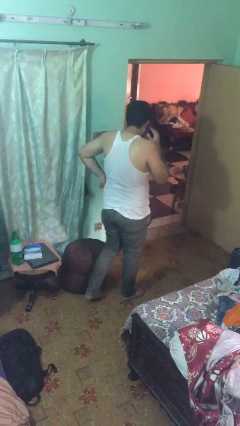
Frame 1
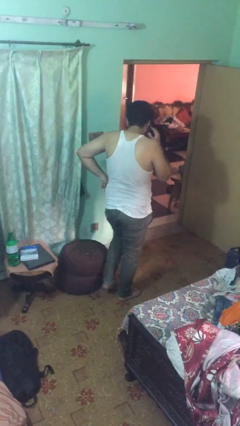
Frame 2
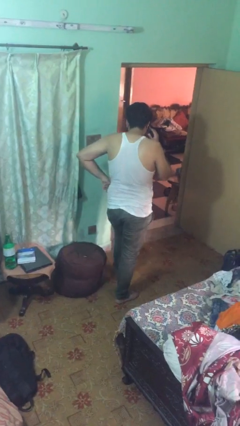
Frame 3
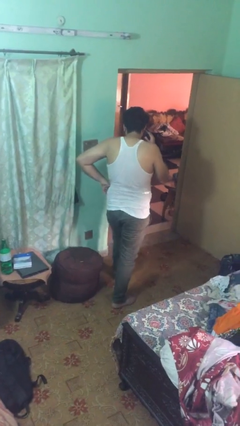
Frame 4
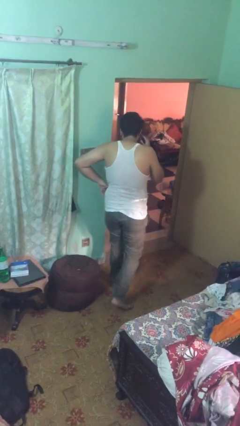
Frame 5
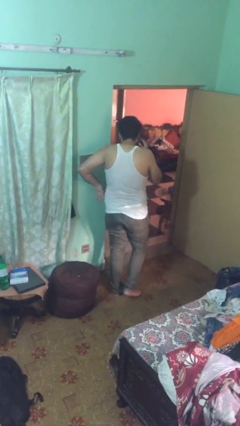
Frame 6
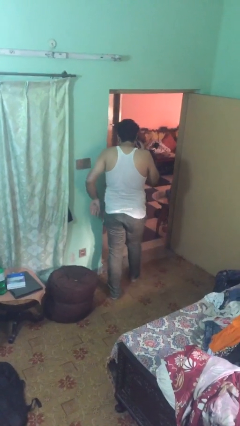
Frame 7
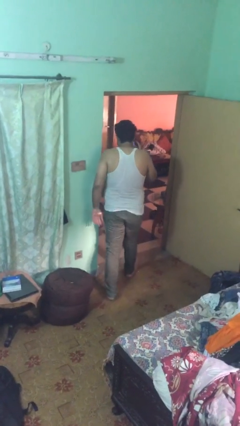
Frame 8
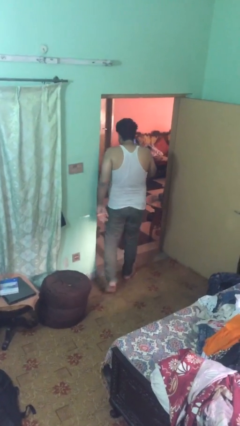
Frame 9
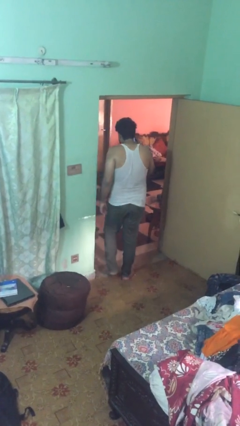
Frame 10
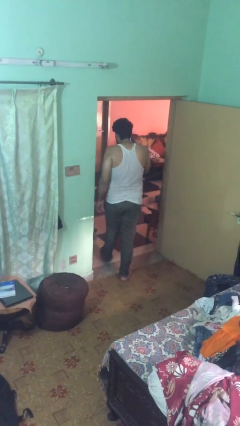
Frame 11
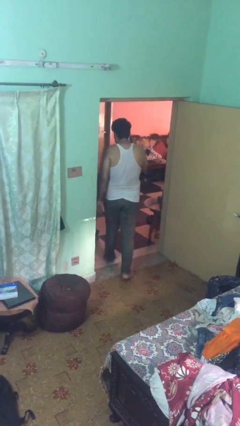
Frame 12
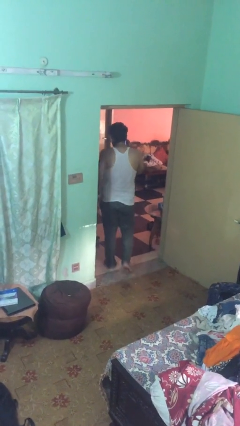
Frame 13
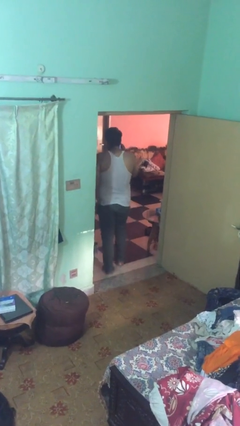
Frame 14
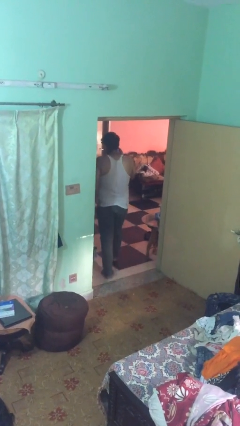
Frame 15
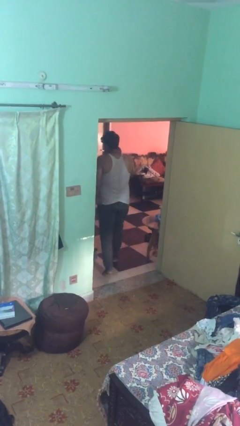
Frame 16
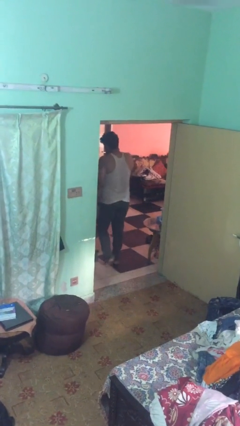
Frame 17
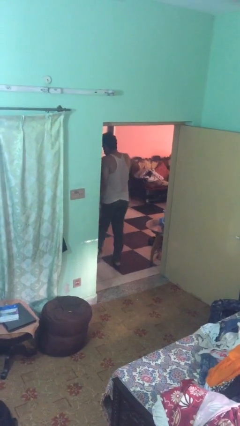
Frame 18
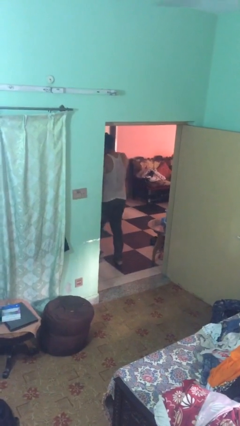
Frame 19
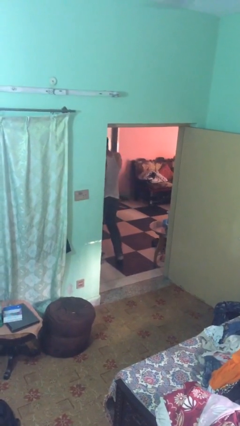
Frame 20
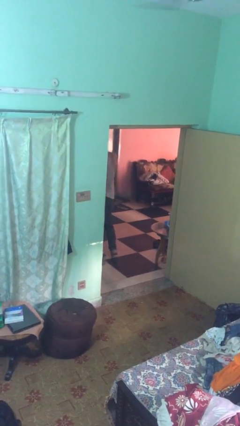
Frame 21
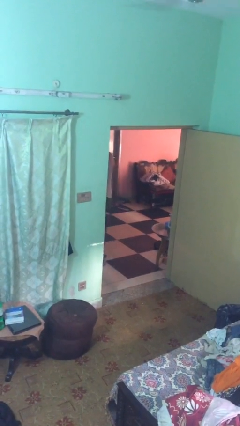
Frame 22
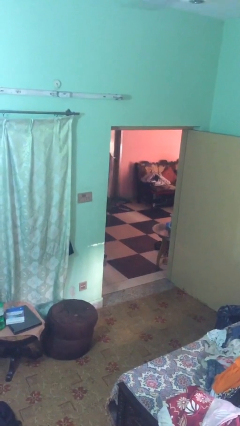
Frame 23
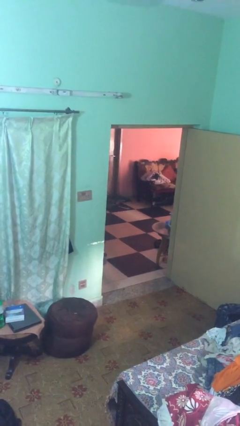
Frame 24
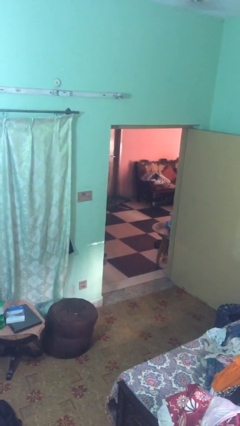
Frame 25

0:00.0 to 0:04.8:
person exits scene through structure

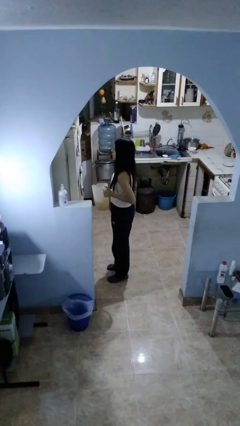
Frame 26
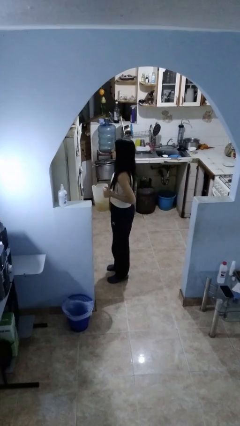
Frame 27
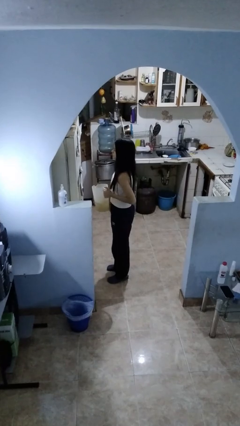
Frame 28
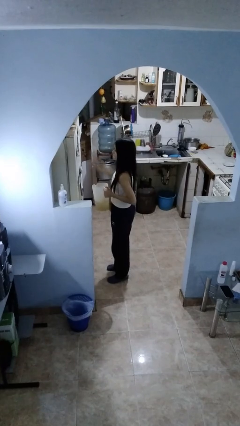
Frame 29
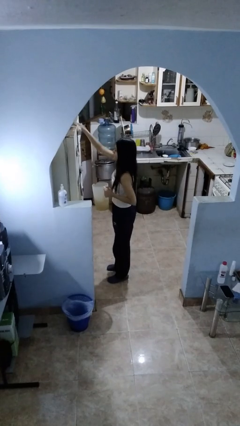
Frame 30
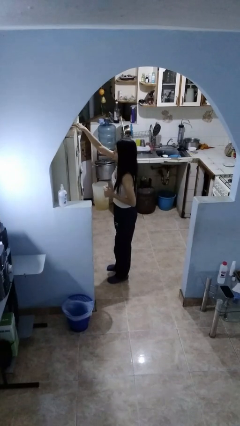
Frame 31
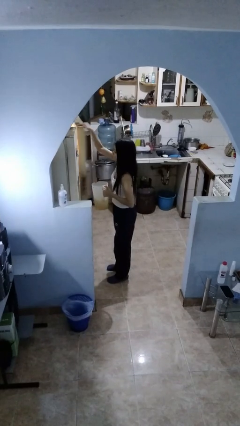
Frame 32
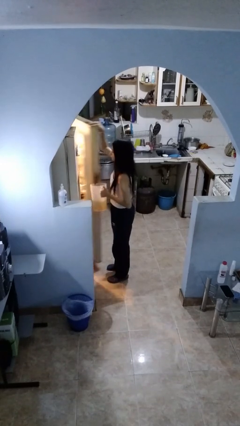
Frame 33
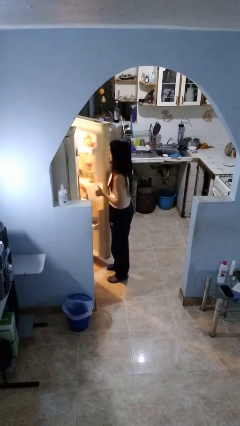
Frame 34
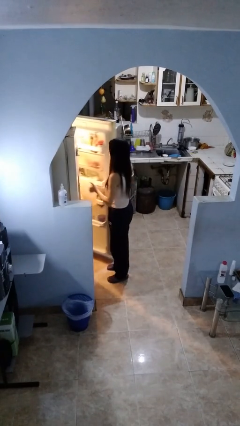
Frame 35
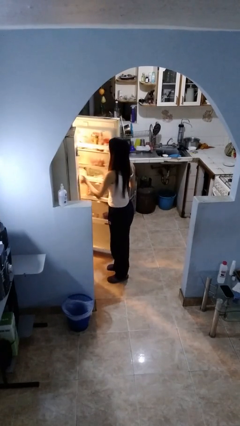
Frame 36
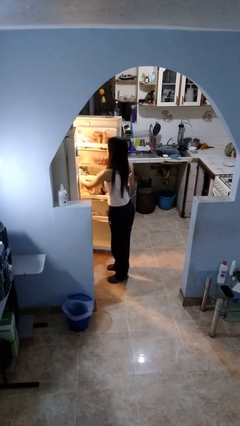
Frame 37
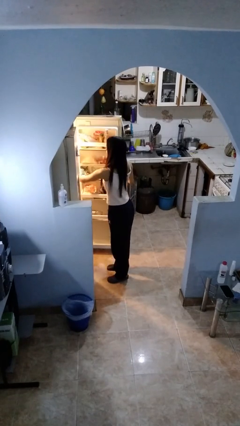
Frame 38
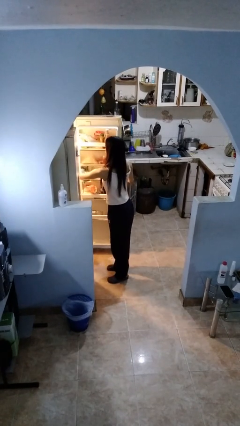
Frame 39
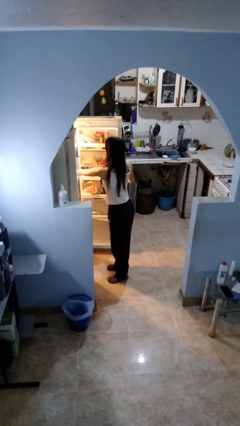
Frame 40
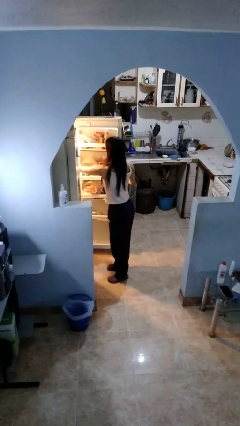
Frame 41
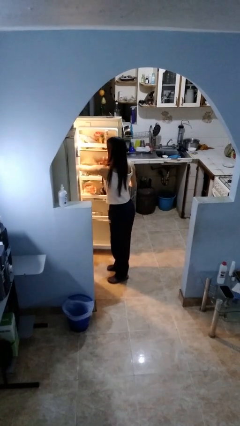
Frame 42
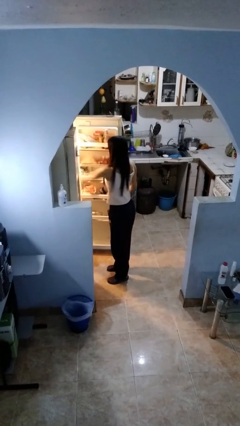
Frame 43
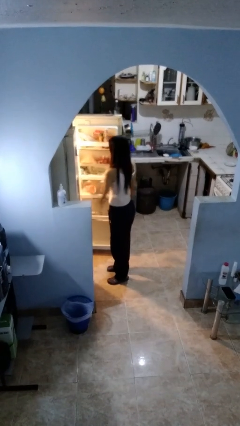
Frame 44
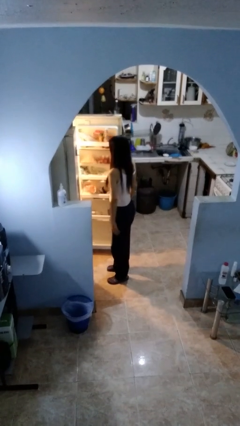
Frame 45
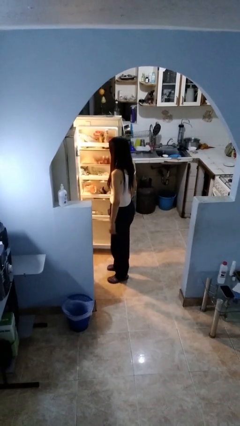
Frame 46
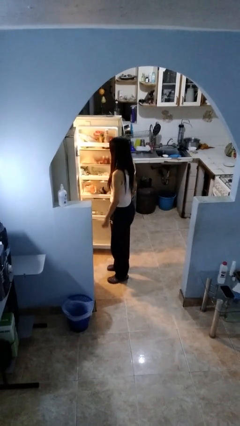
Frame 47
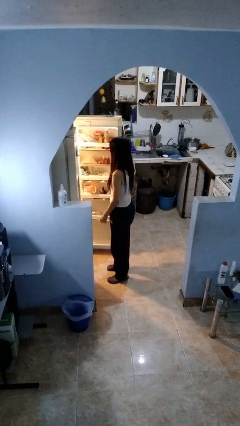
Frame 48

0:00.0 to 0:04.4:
person puts object into refrigerator

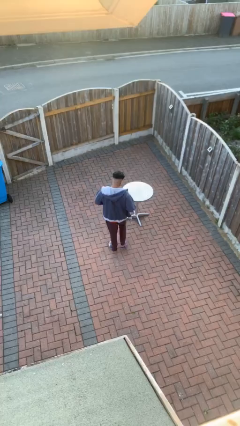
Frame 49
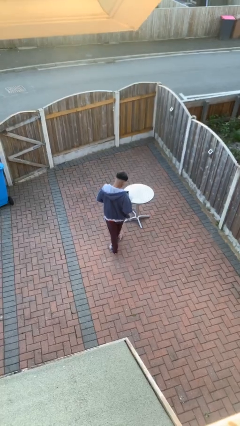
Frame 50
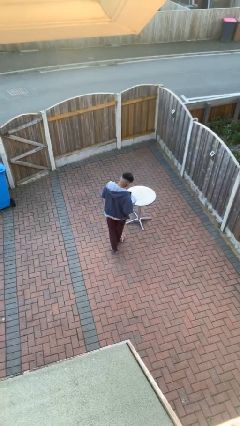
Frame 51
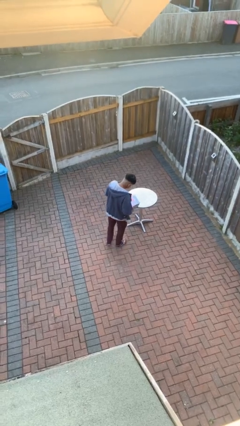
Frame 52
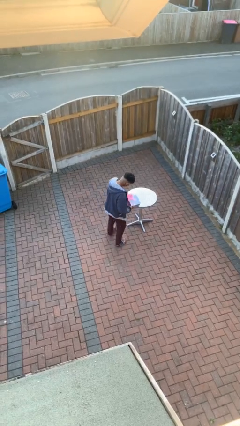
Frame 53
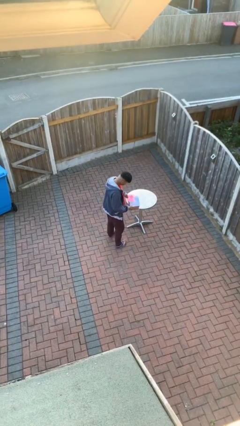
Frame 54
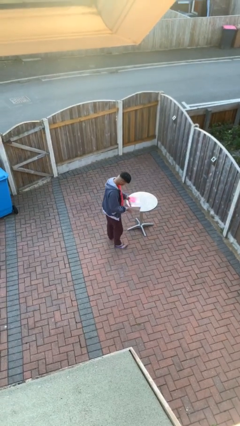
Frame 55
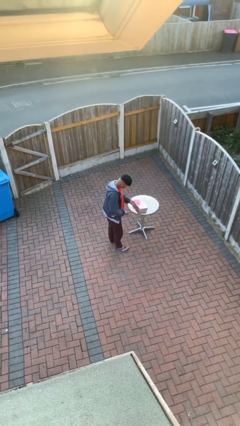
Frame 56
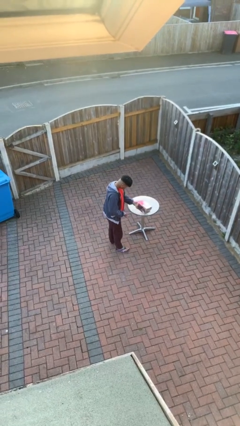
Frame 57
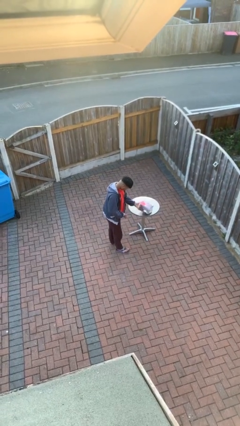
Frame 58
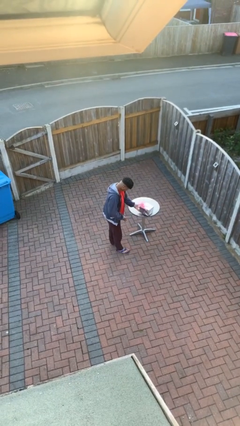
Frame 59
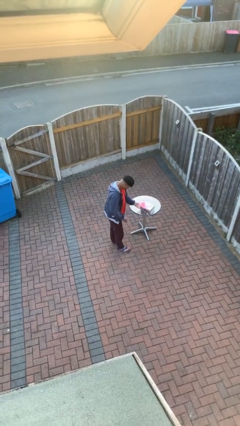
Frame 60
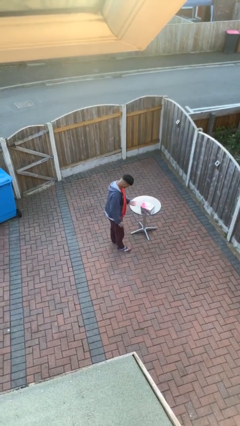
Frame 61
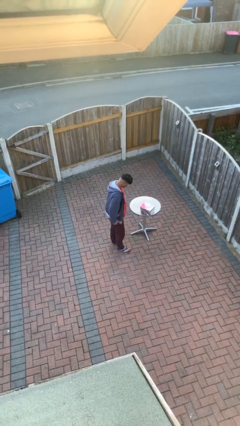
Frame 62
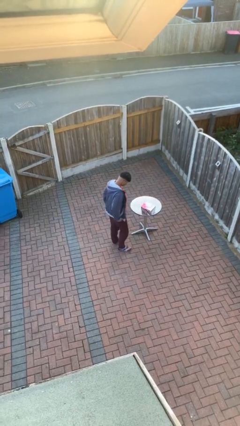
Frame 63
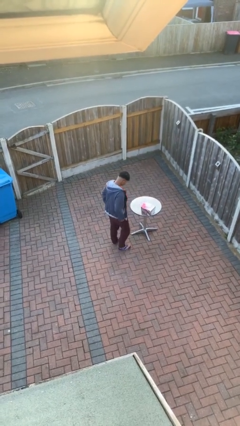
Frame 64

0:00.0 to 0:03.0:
person puts down object on table

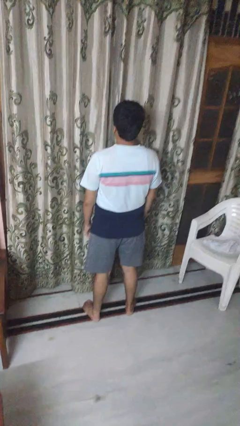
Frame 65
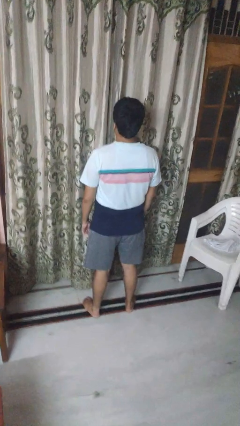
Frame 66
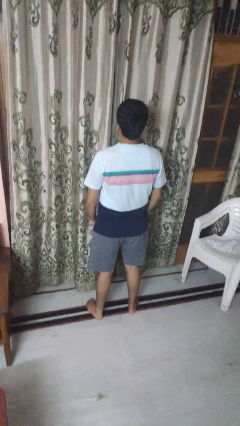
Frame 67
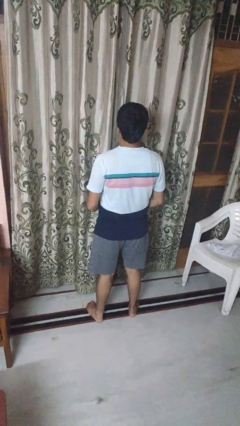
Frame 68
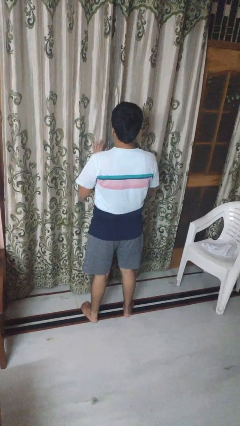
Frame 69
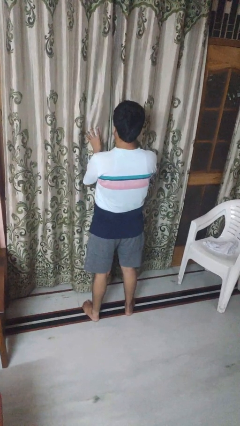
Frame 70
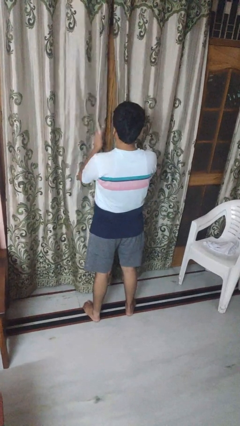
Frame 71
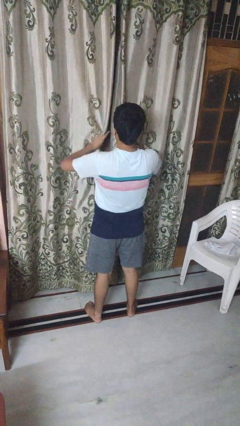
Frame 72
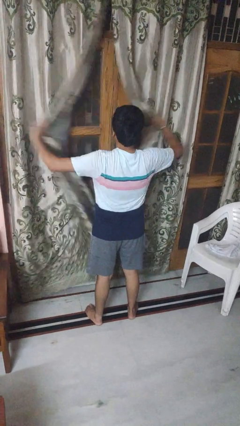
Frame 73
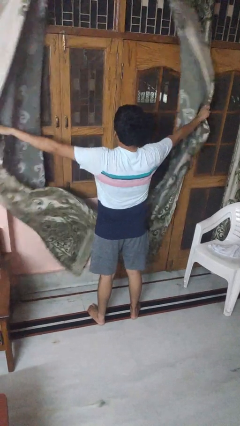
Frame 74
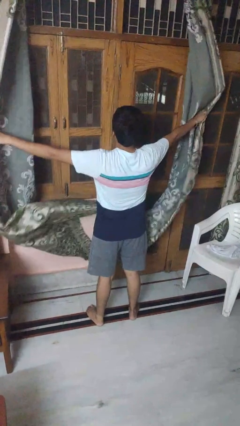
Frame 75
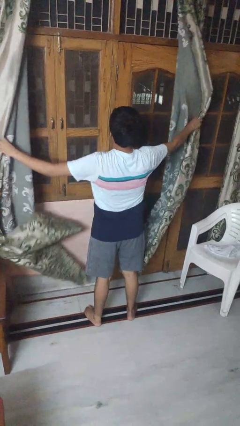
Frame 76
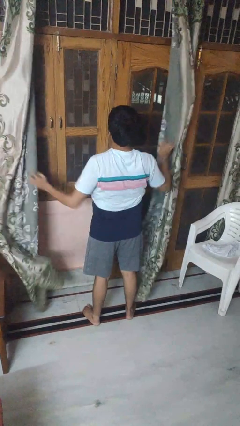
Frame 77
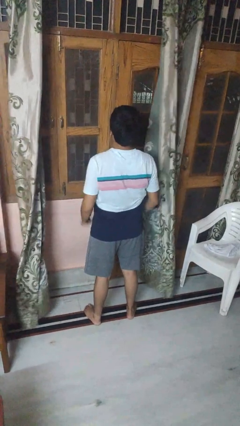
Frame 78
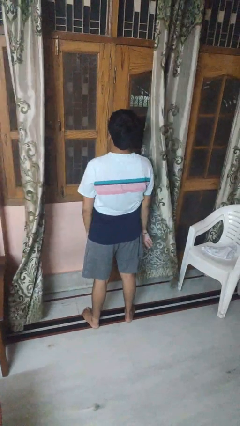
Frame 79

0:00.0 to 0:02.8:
person opens curtains

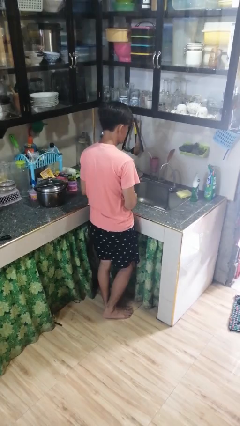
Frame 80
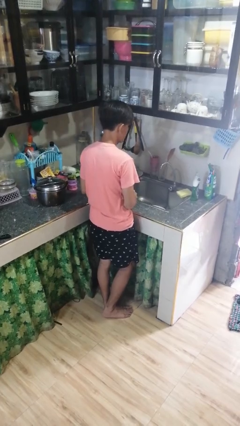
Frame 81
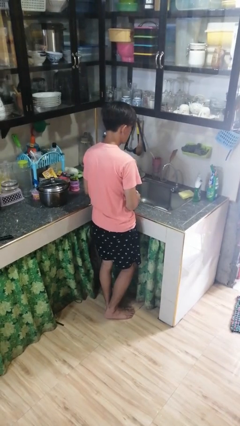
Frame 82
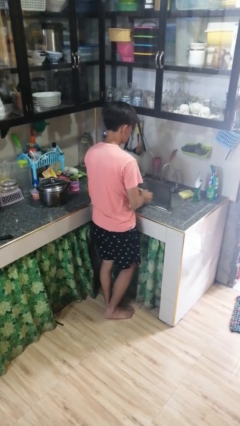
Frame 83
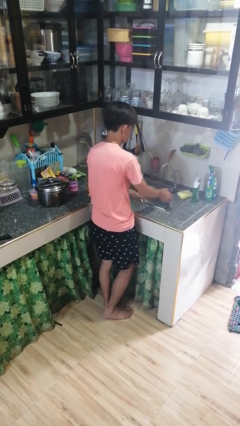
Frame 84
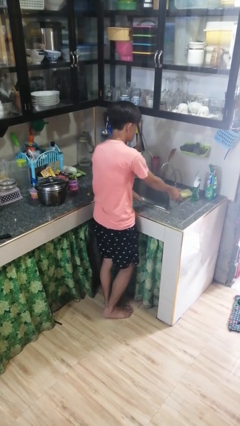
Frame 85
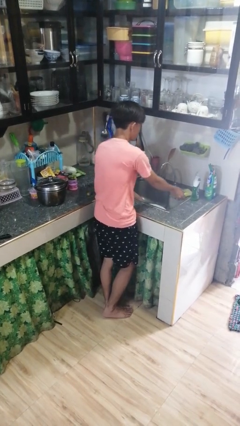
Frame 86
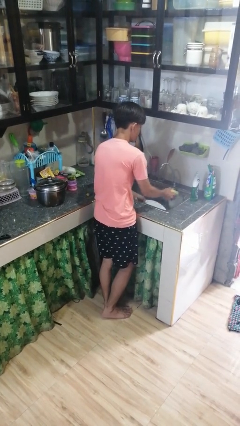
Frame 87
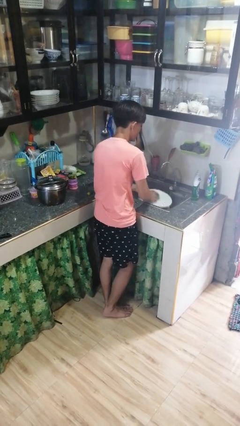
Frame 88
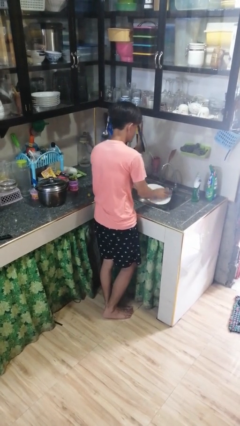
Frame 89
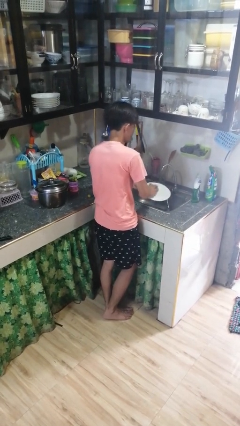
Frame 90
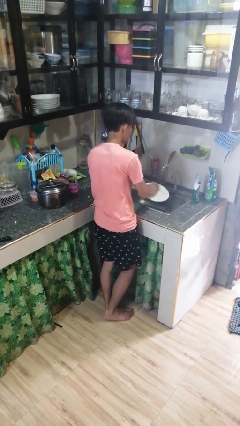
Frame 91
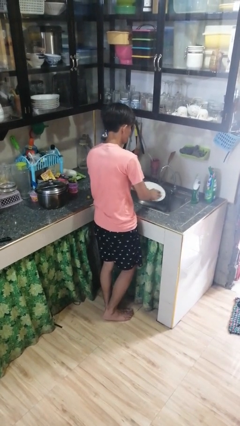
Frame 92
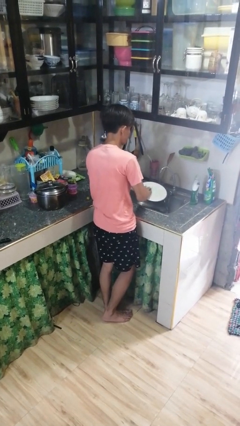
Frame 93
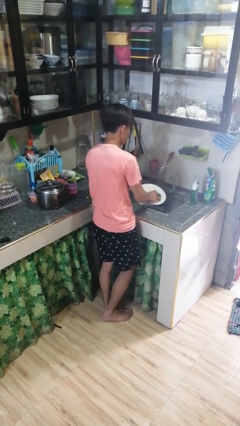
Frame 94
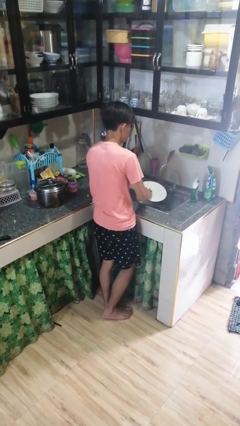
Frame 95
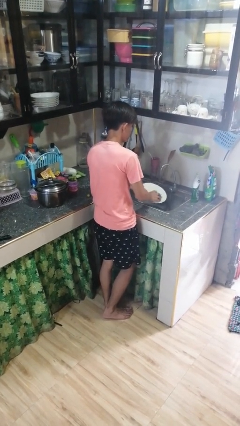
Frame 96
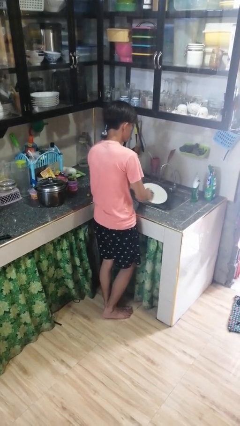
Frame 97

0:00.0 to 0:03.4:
person washes dish
